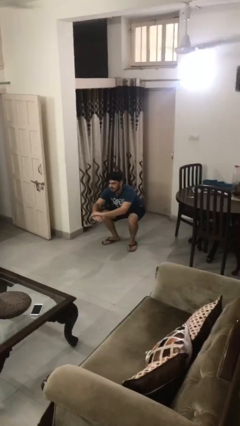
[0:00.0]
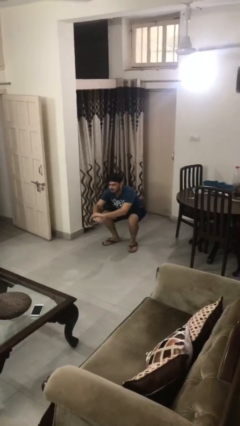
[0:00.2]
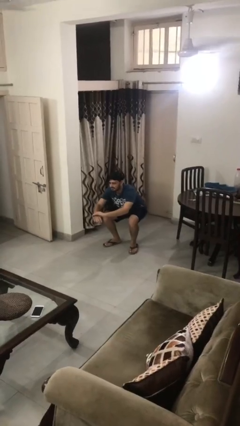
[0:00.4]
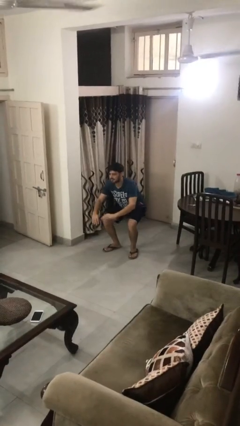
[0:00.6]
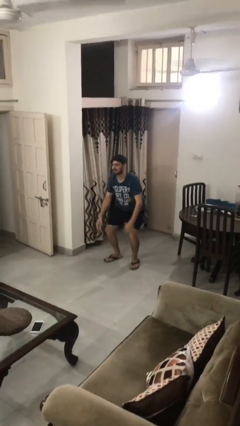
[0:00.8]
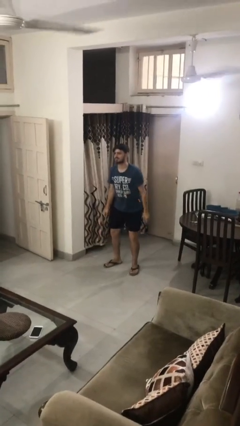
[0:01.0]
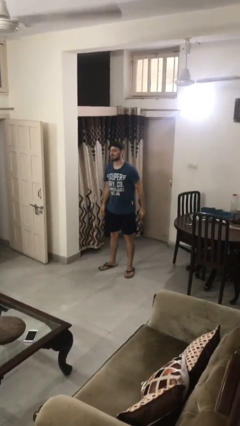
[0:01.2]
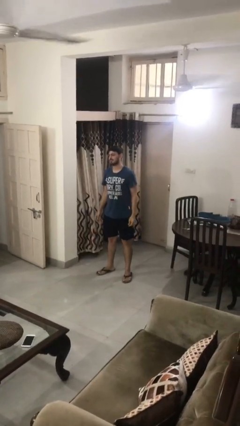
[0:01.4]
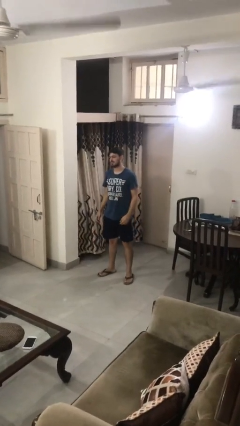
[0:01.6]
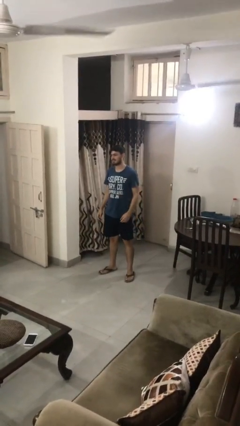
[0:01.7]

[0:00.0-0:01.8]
person stands up

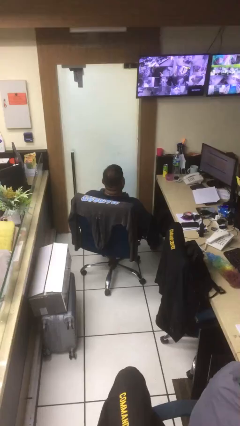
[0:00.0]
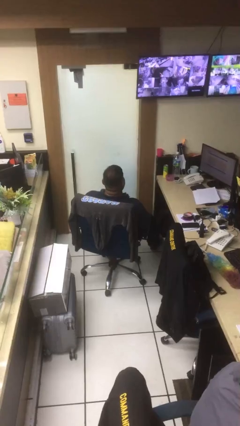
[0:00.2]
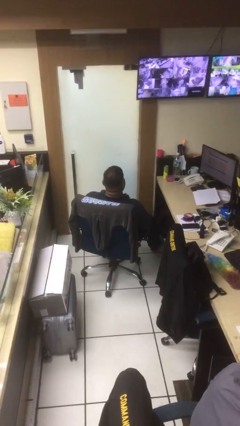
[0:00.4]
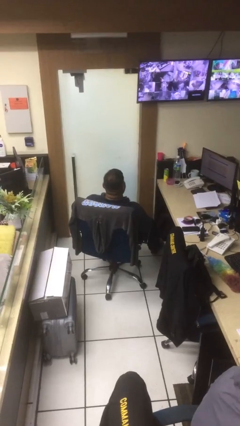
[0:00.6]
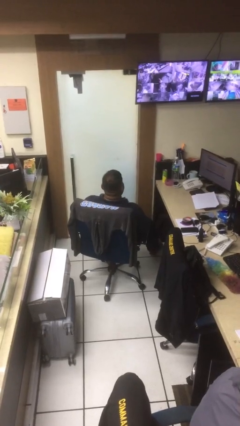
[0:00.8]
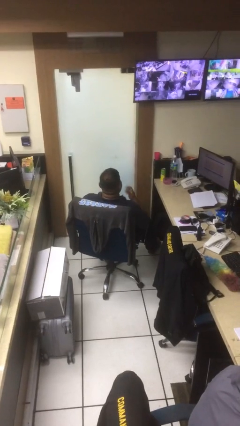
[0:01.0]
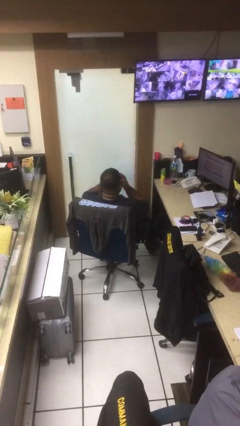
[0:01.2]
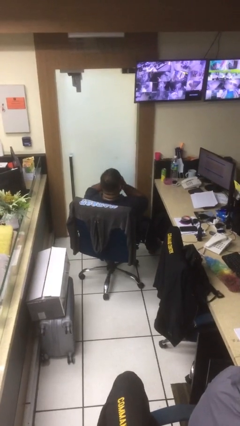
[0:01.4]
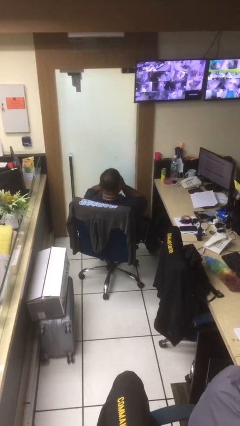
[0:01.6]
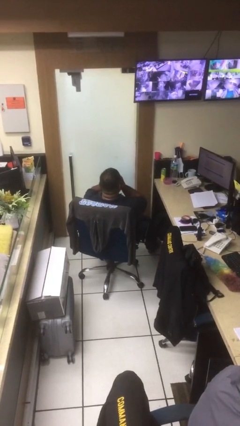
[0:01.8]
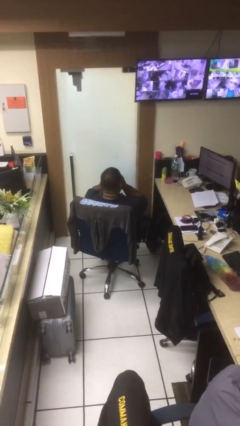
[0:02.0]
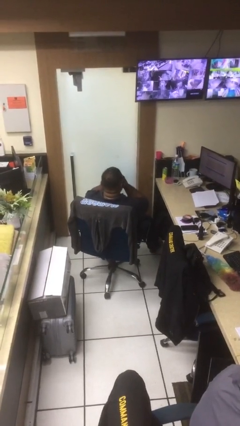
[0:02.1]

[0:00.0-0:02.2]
person covers face with hands

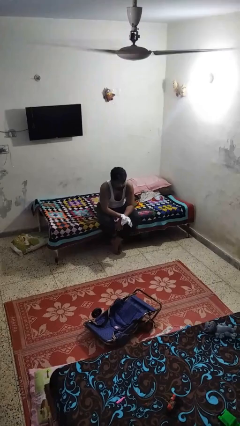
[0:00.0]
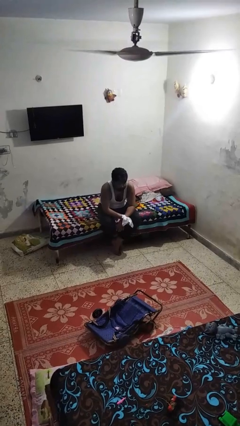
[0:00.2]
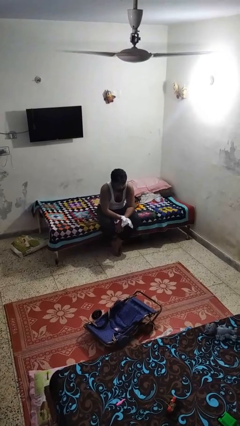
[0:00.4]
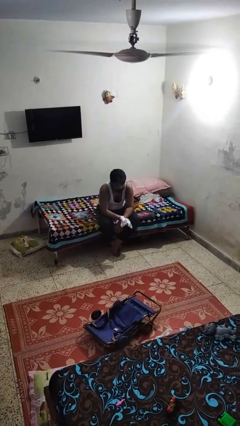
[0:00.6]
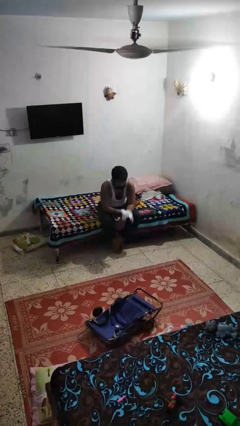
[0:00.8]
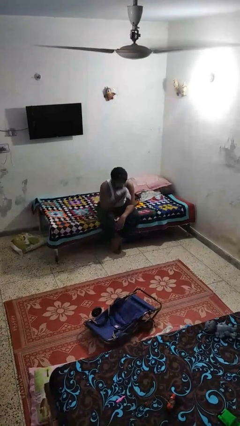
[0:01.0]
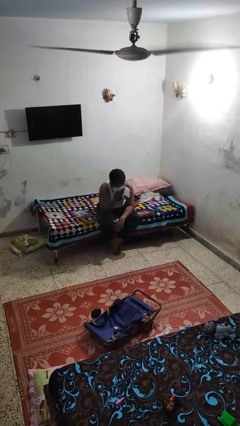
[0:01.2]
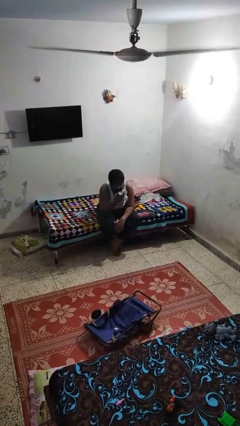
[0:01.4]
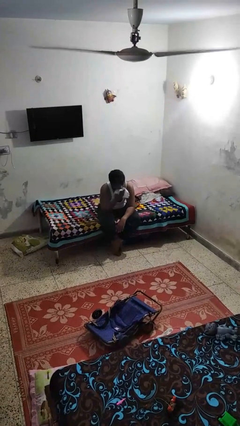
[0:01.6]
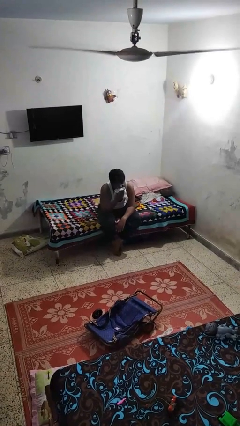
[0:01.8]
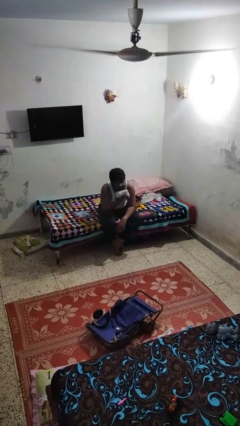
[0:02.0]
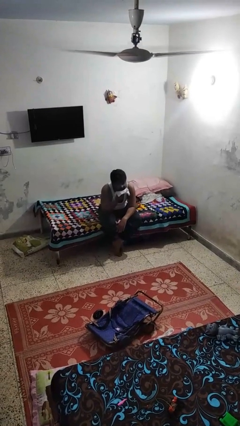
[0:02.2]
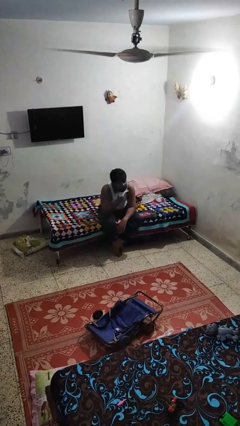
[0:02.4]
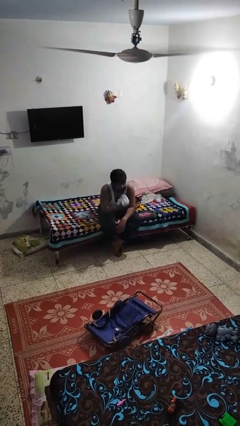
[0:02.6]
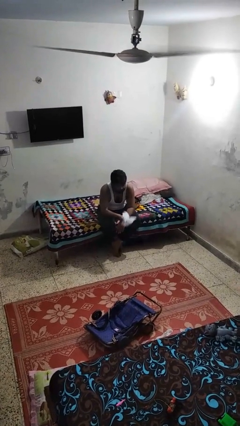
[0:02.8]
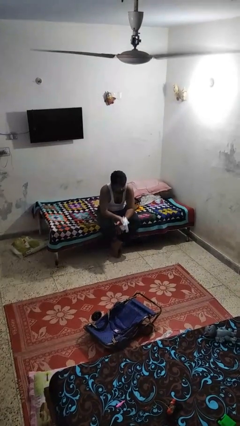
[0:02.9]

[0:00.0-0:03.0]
person wipes mouth with napkin

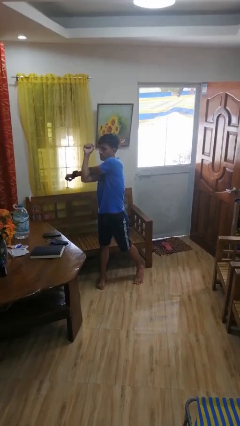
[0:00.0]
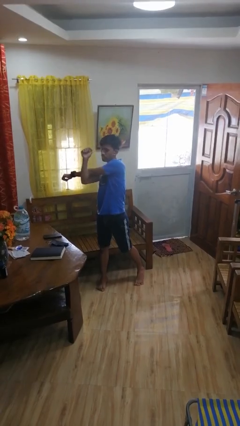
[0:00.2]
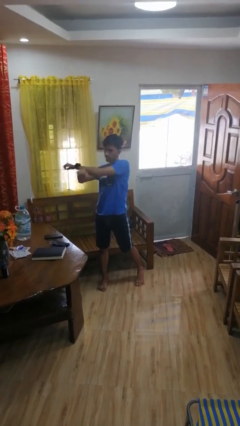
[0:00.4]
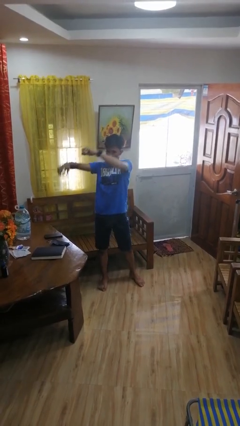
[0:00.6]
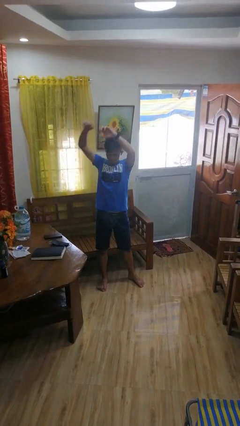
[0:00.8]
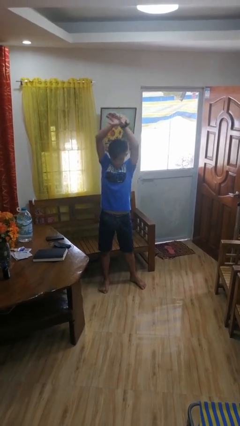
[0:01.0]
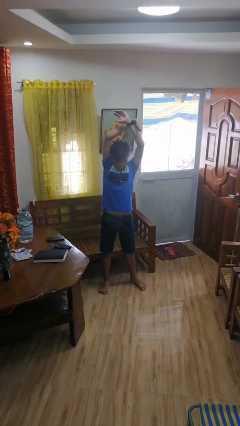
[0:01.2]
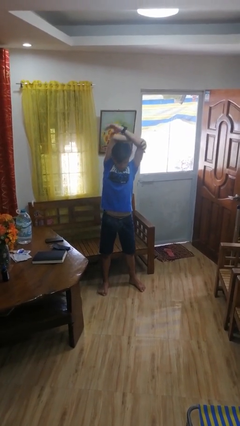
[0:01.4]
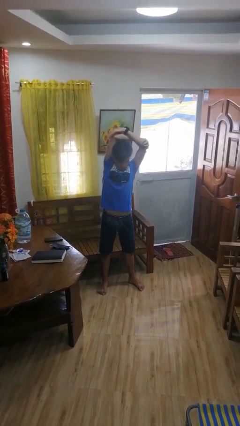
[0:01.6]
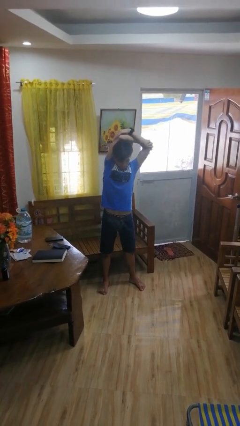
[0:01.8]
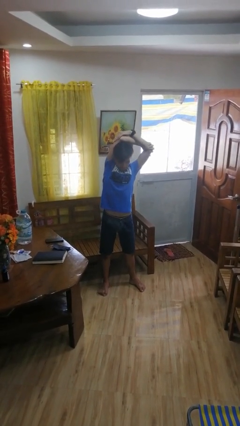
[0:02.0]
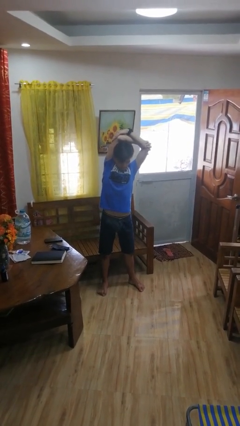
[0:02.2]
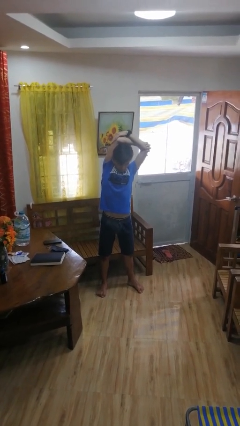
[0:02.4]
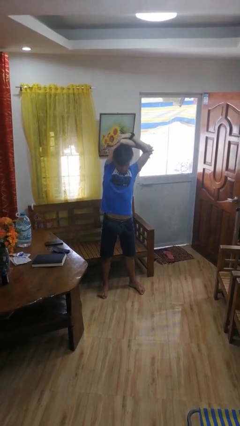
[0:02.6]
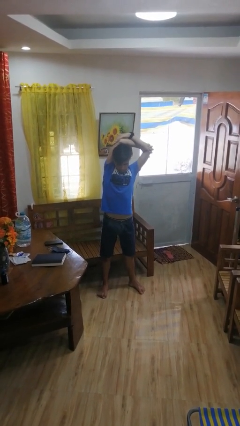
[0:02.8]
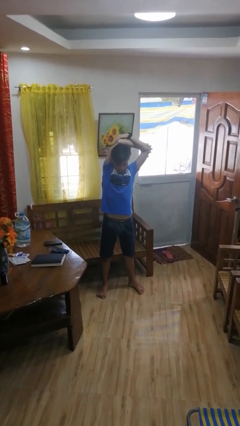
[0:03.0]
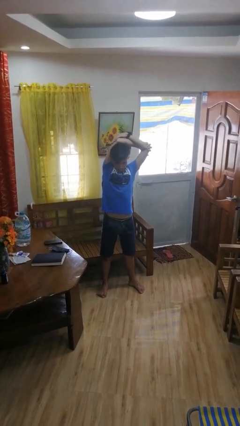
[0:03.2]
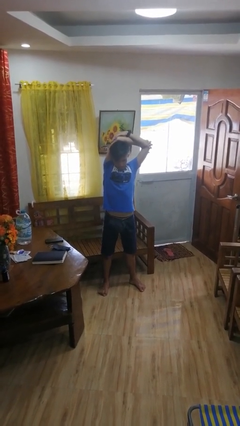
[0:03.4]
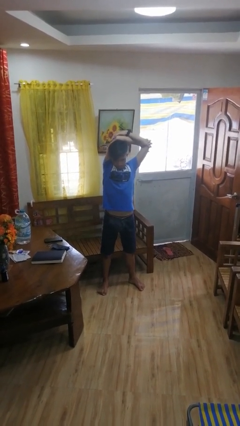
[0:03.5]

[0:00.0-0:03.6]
person stretches arms over head

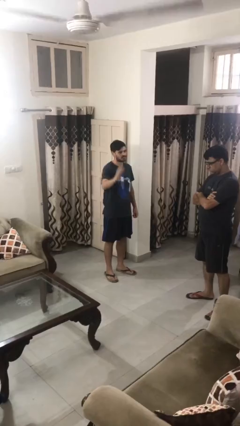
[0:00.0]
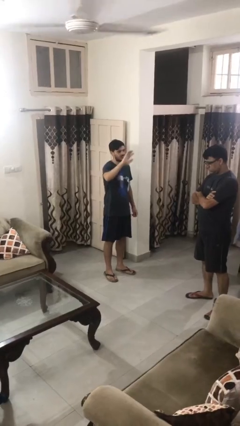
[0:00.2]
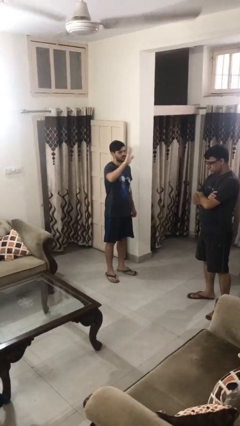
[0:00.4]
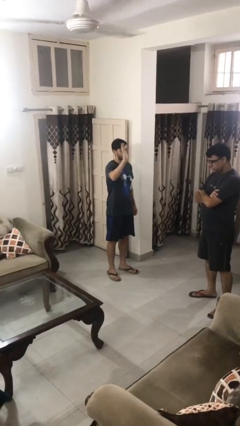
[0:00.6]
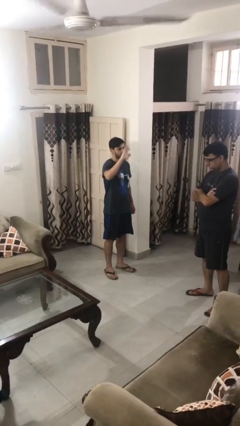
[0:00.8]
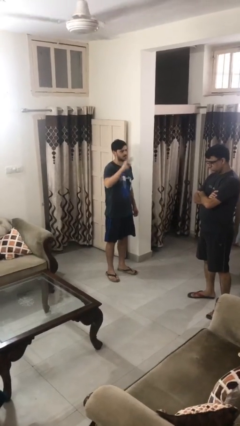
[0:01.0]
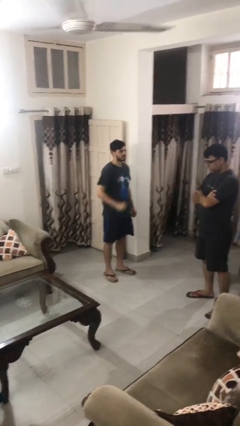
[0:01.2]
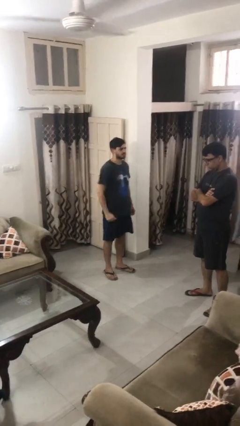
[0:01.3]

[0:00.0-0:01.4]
person waves at person

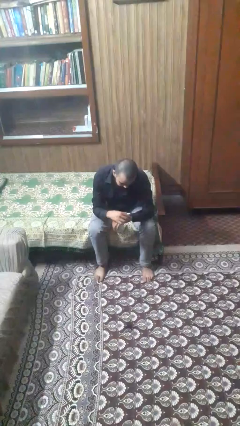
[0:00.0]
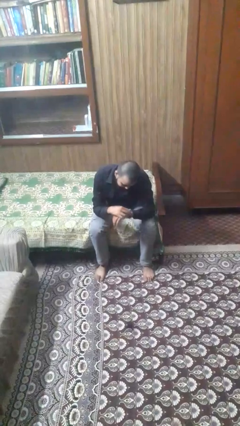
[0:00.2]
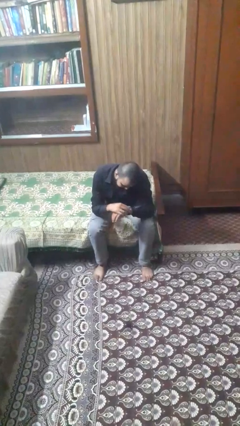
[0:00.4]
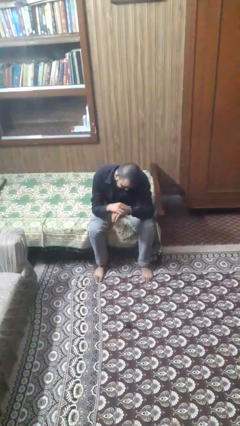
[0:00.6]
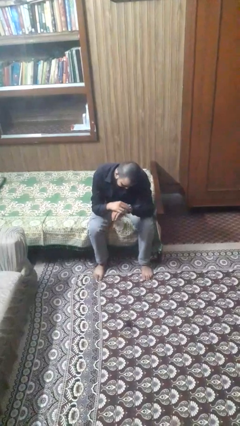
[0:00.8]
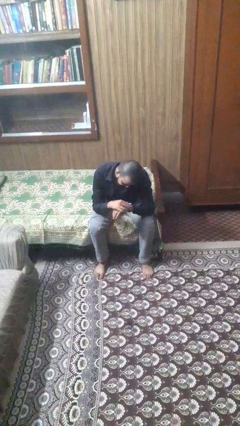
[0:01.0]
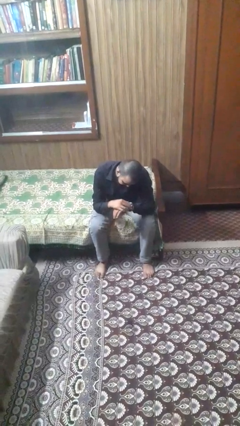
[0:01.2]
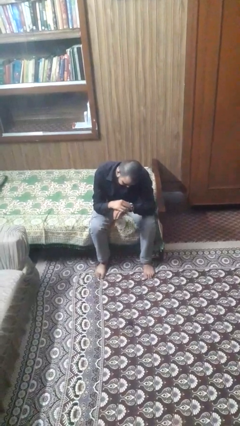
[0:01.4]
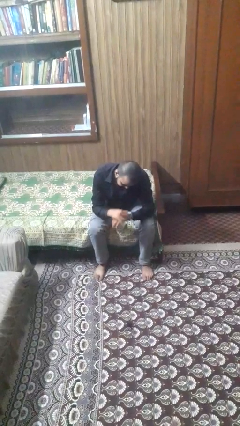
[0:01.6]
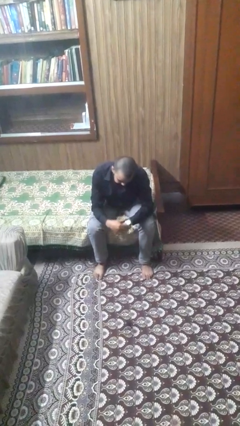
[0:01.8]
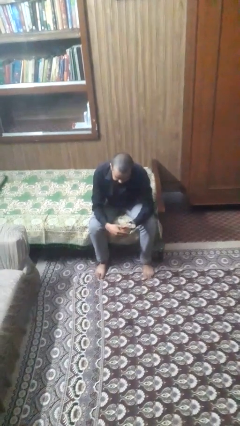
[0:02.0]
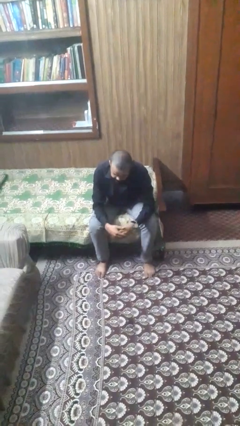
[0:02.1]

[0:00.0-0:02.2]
person looks at hands in lap

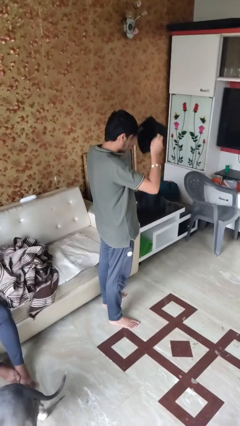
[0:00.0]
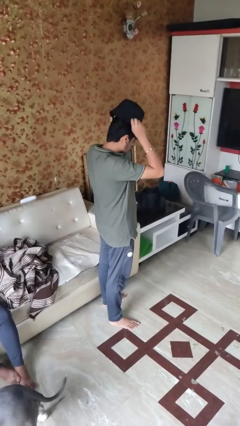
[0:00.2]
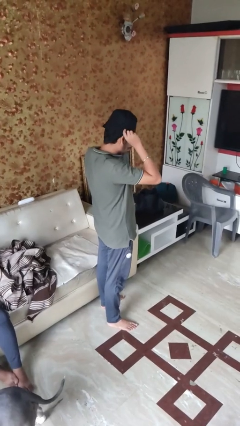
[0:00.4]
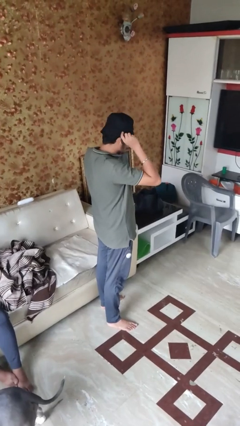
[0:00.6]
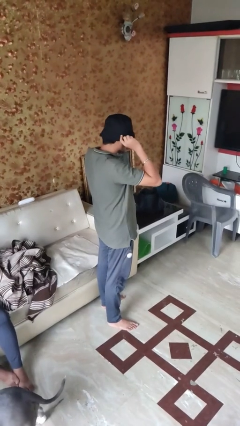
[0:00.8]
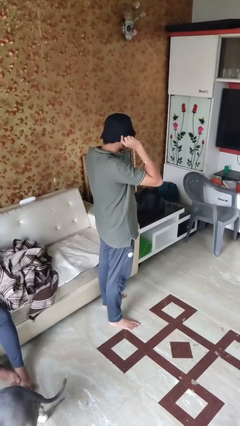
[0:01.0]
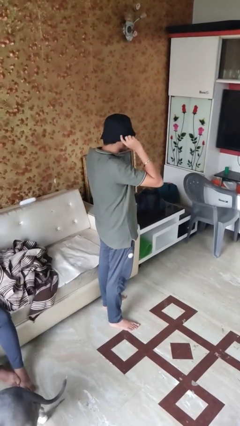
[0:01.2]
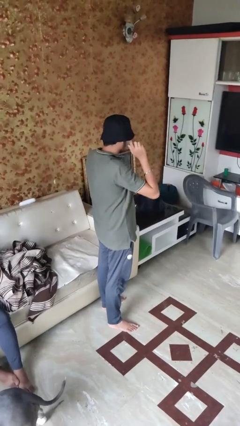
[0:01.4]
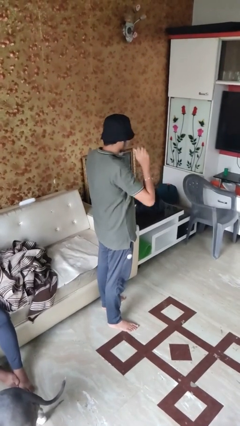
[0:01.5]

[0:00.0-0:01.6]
person puts on hat

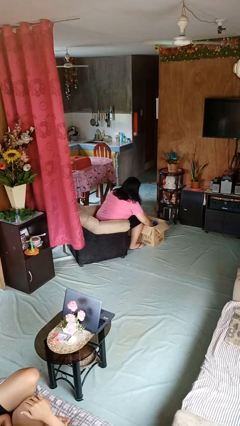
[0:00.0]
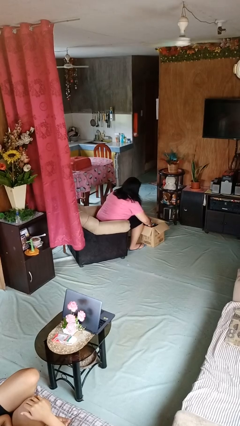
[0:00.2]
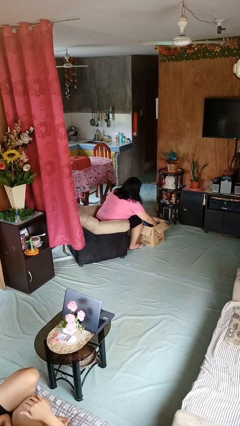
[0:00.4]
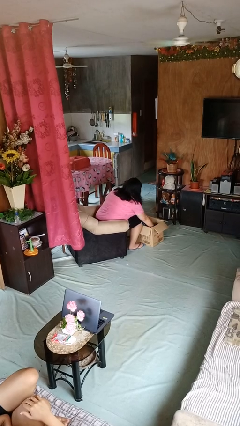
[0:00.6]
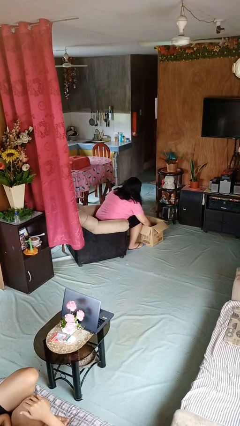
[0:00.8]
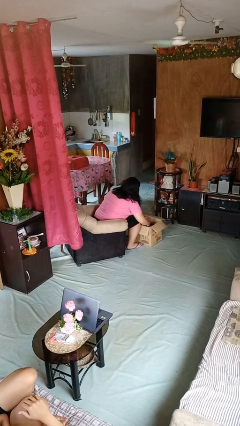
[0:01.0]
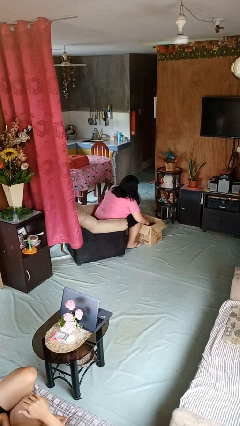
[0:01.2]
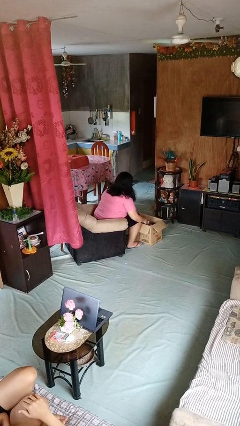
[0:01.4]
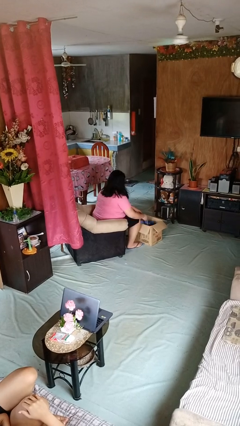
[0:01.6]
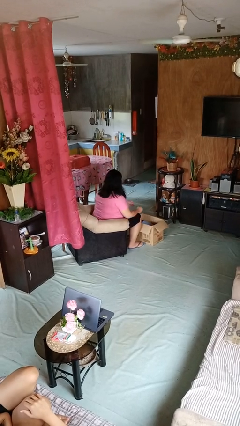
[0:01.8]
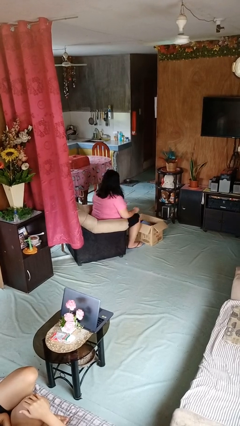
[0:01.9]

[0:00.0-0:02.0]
person searches in box
